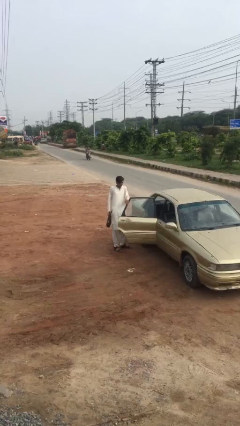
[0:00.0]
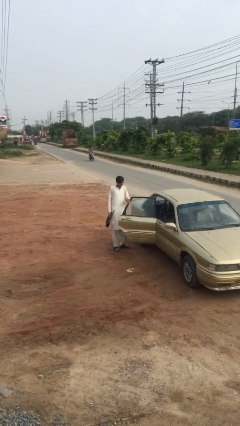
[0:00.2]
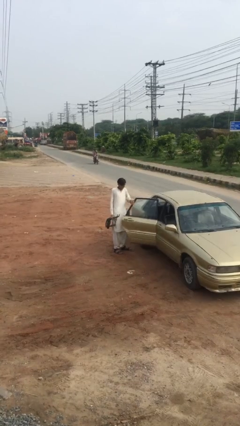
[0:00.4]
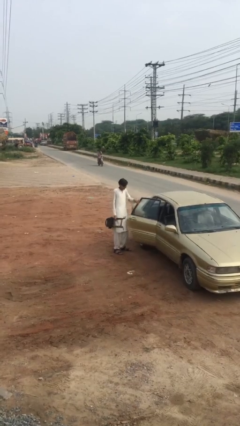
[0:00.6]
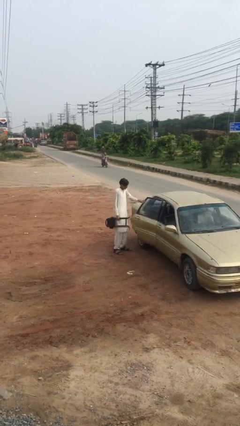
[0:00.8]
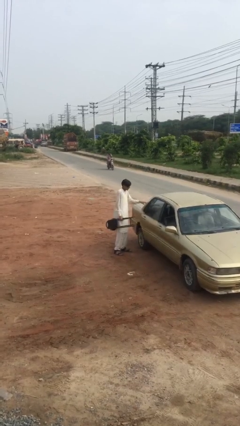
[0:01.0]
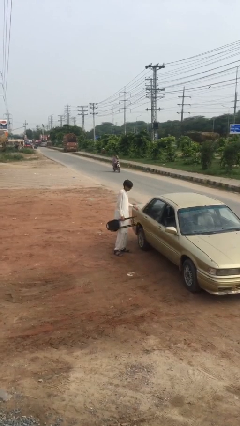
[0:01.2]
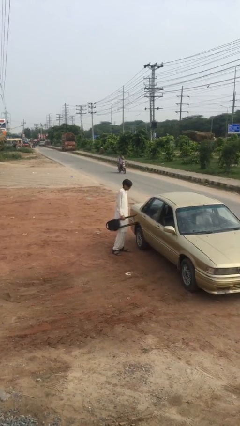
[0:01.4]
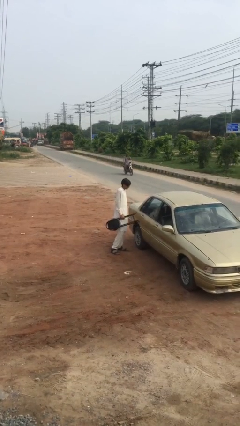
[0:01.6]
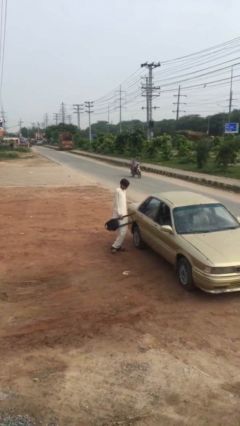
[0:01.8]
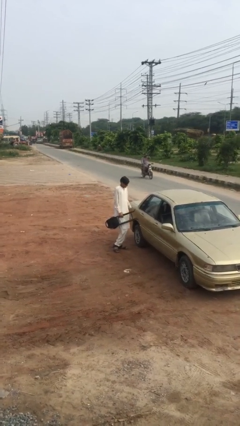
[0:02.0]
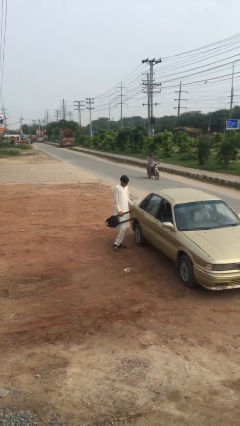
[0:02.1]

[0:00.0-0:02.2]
person closes car door

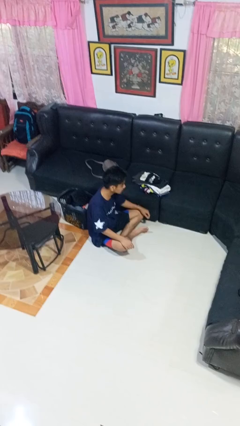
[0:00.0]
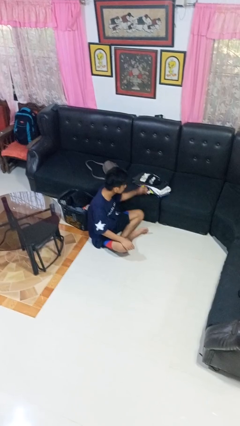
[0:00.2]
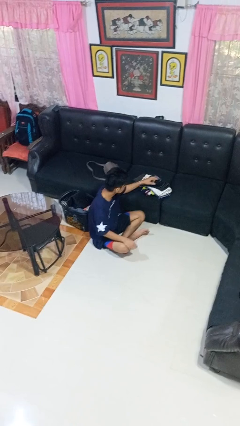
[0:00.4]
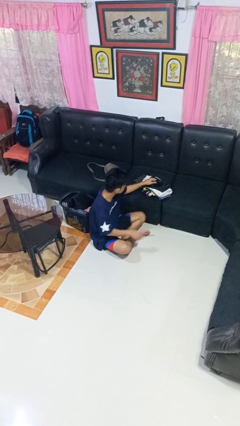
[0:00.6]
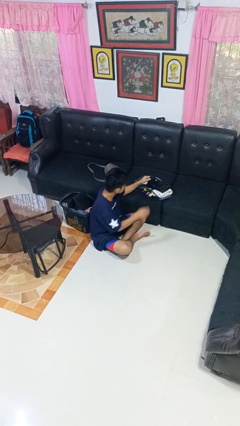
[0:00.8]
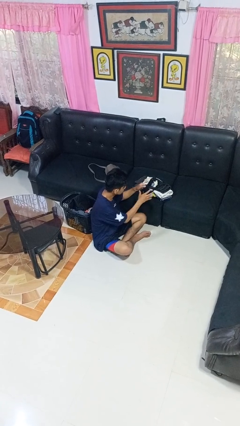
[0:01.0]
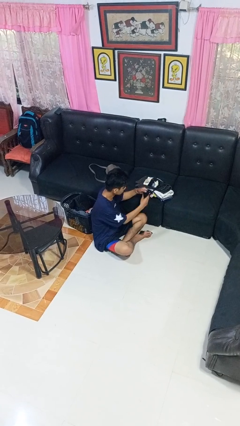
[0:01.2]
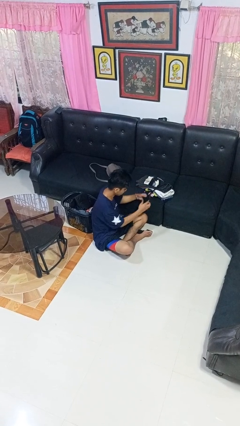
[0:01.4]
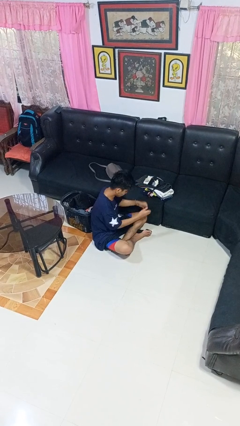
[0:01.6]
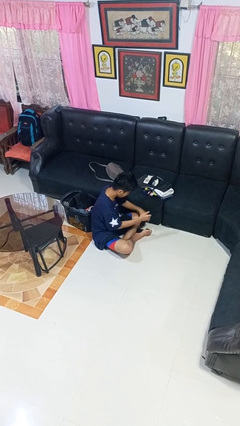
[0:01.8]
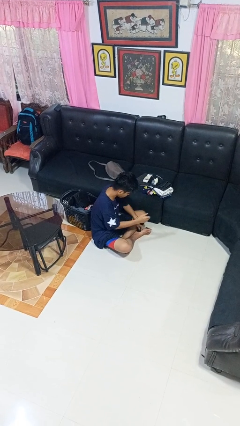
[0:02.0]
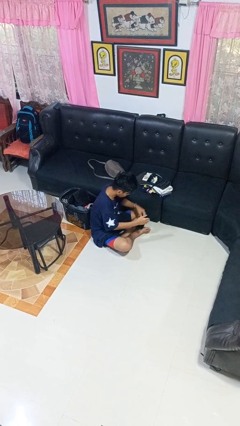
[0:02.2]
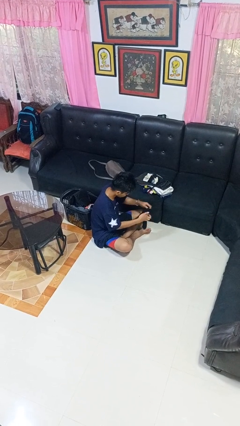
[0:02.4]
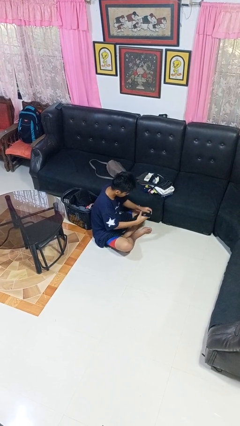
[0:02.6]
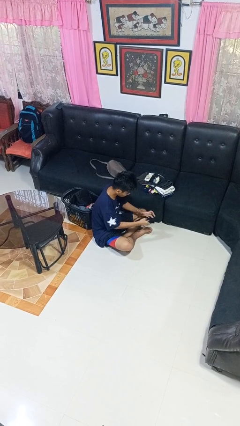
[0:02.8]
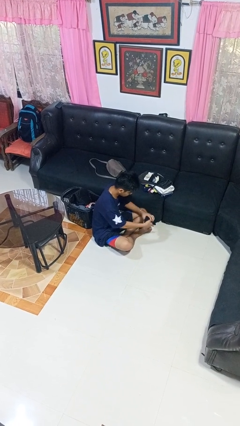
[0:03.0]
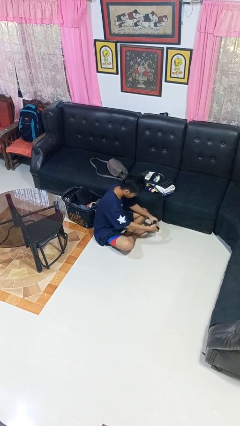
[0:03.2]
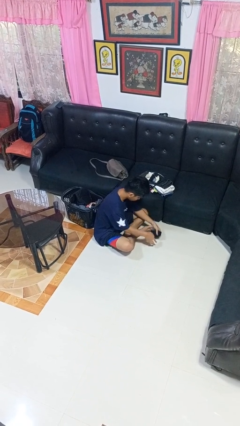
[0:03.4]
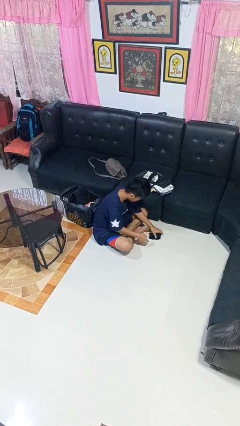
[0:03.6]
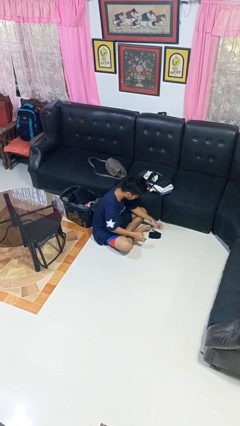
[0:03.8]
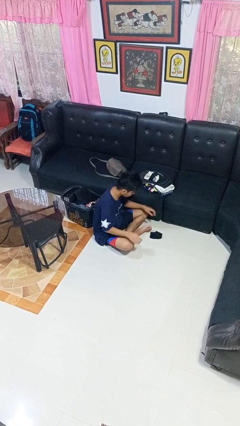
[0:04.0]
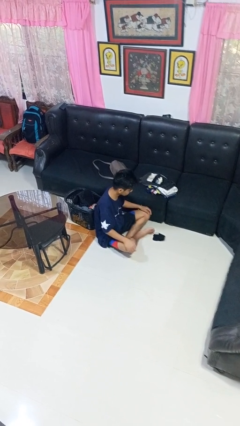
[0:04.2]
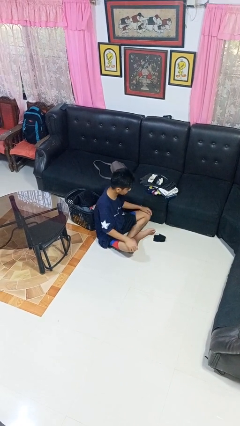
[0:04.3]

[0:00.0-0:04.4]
person folds socks

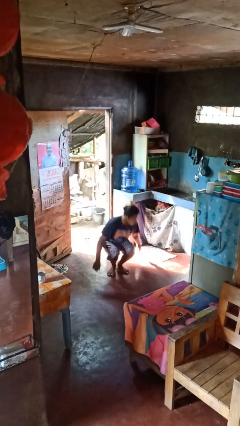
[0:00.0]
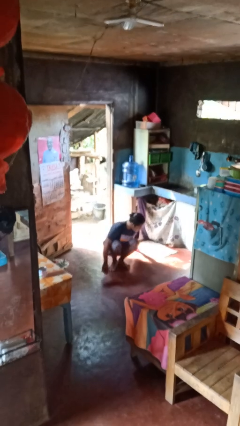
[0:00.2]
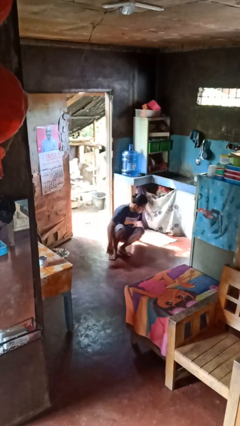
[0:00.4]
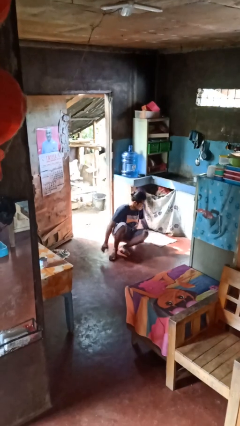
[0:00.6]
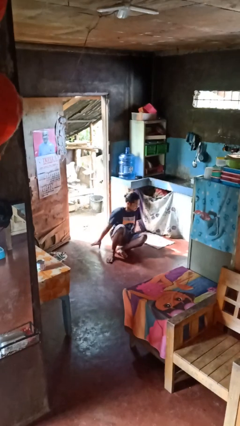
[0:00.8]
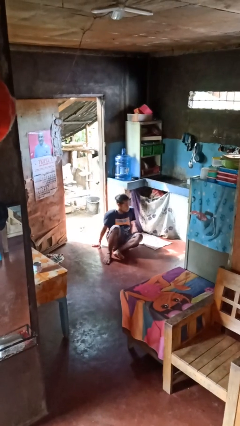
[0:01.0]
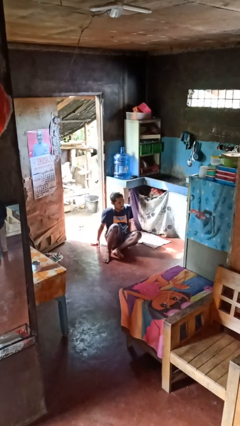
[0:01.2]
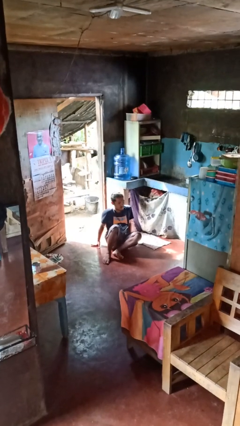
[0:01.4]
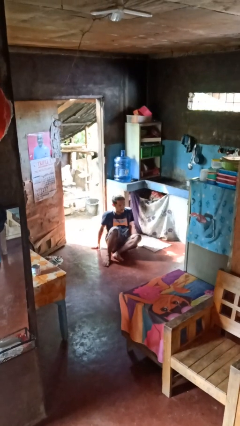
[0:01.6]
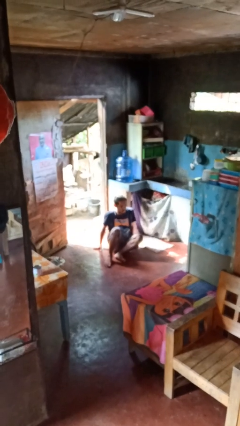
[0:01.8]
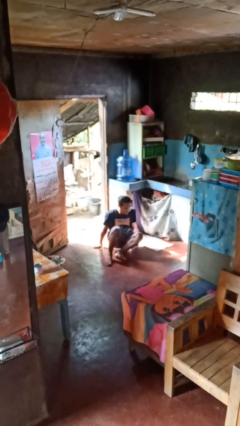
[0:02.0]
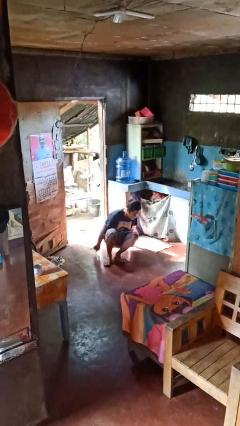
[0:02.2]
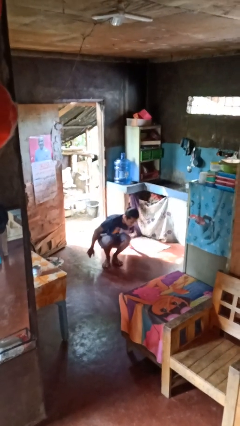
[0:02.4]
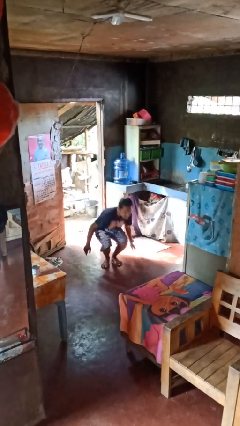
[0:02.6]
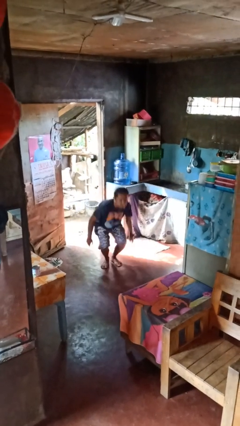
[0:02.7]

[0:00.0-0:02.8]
person falls while standing

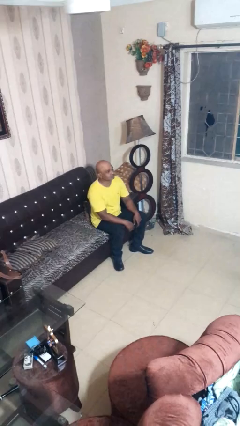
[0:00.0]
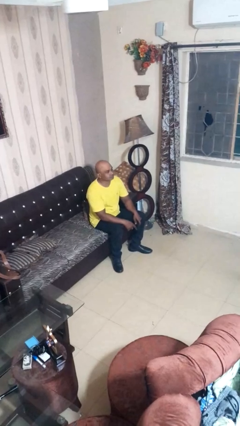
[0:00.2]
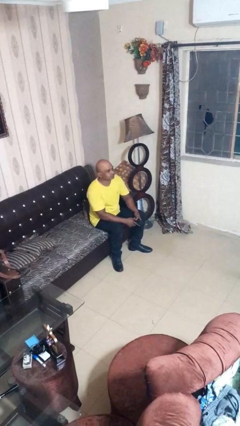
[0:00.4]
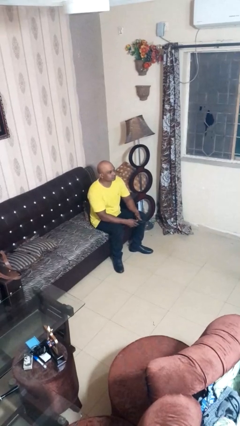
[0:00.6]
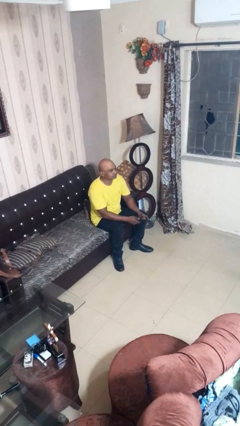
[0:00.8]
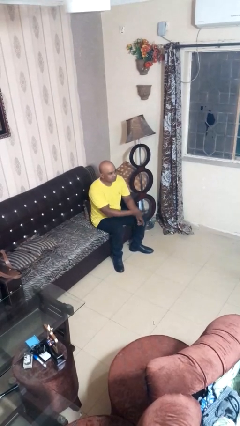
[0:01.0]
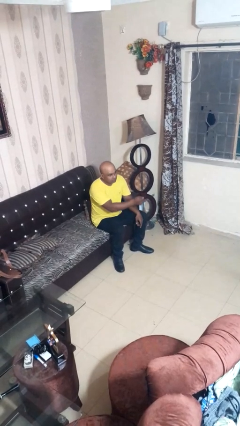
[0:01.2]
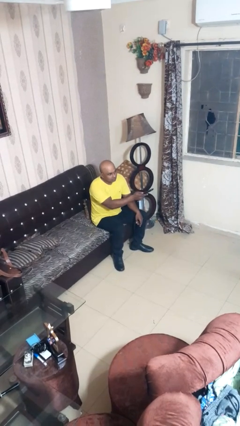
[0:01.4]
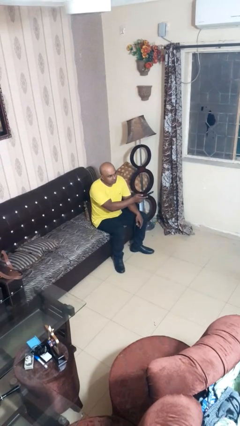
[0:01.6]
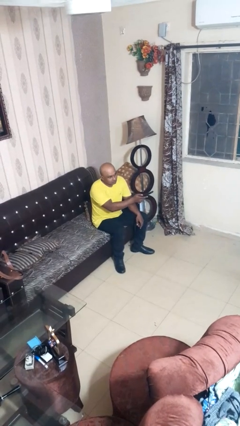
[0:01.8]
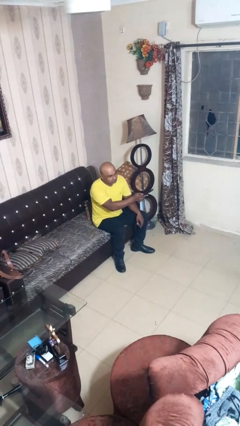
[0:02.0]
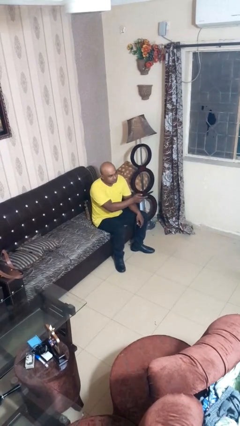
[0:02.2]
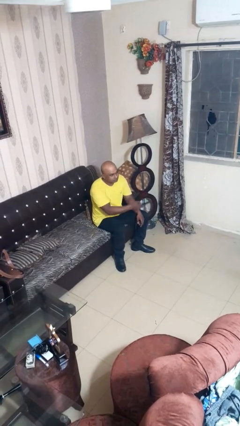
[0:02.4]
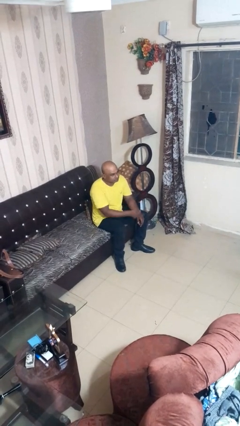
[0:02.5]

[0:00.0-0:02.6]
person uses television remote

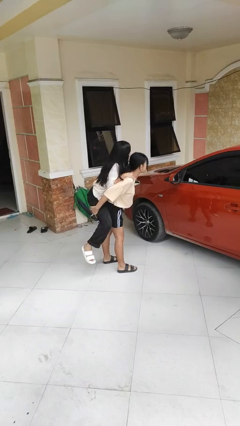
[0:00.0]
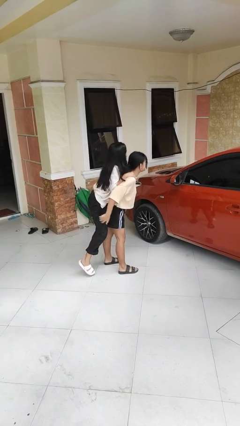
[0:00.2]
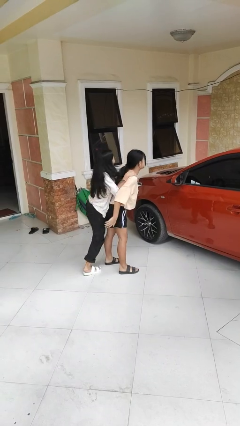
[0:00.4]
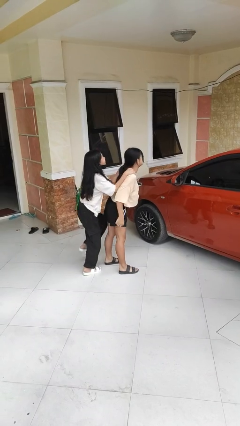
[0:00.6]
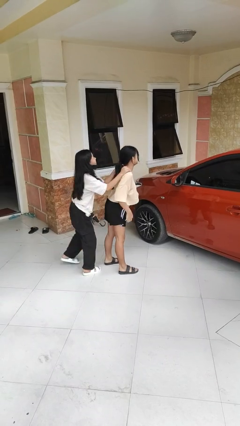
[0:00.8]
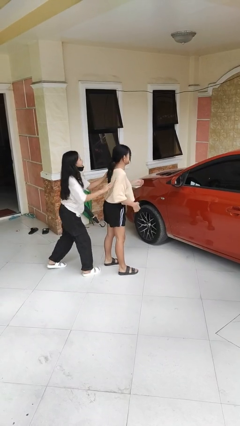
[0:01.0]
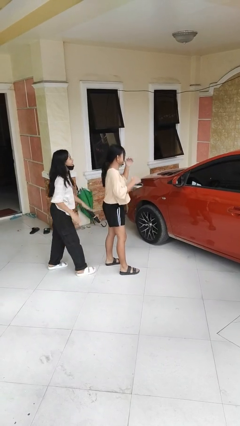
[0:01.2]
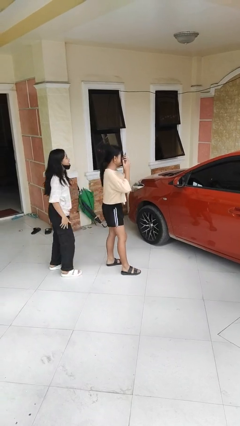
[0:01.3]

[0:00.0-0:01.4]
person puts down person

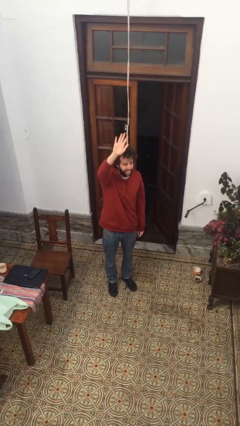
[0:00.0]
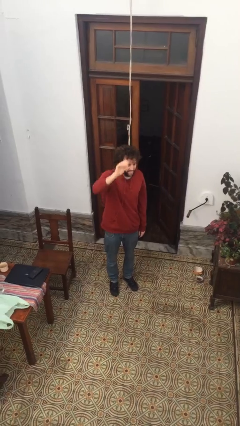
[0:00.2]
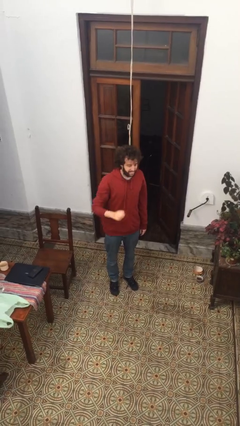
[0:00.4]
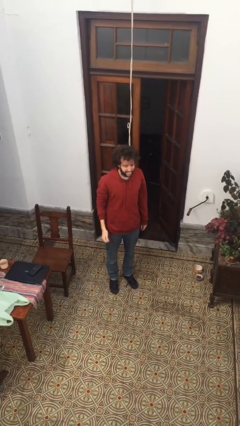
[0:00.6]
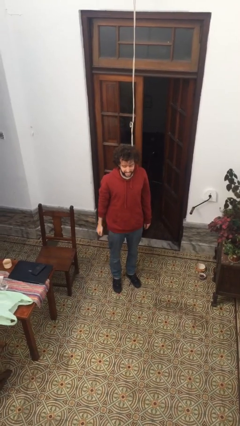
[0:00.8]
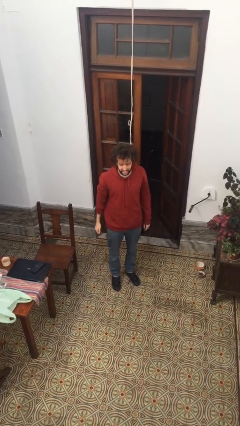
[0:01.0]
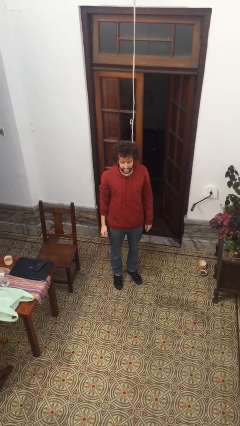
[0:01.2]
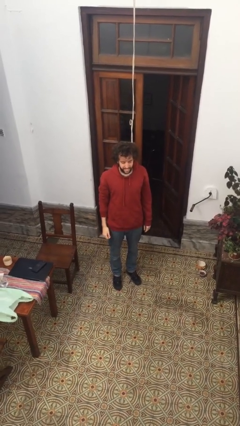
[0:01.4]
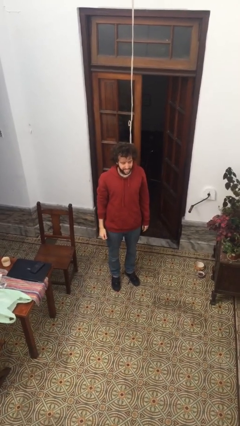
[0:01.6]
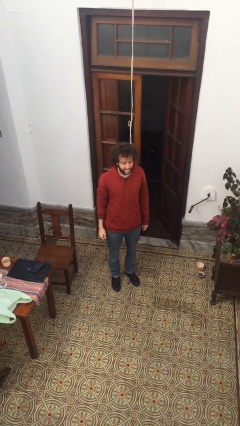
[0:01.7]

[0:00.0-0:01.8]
person gestures lower hand

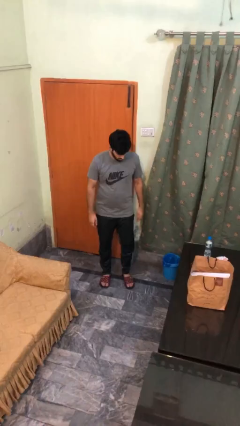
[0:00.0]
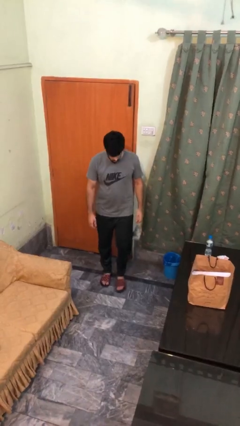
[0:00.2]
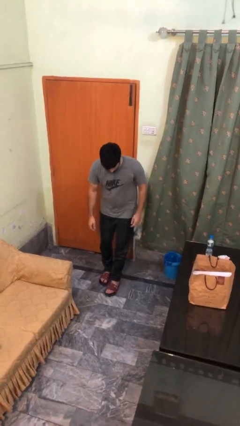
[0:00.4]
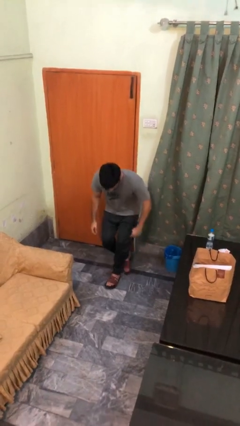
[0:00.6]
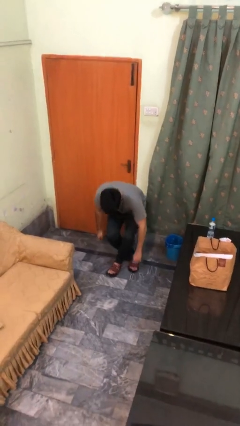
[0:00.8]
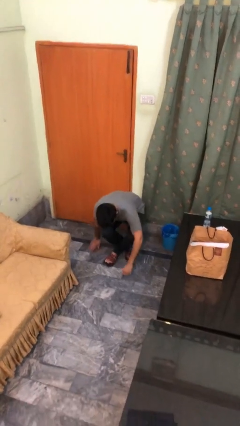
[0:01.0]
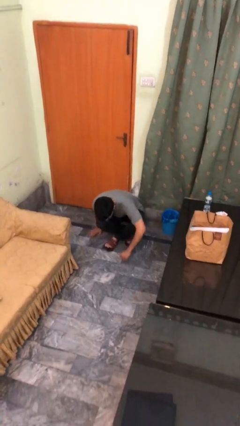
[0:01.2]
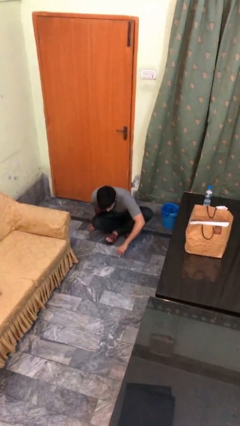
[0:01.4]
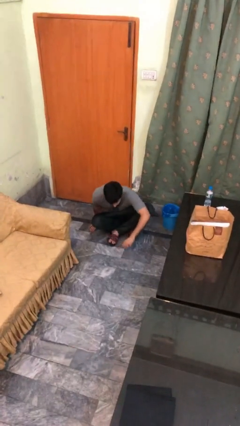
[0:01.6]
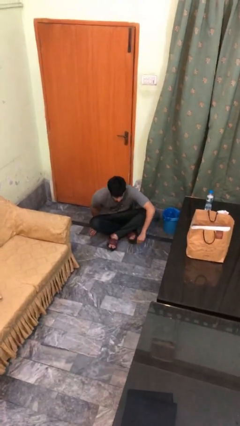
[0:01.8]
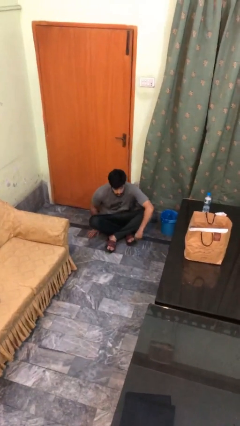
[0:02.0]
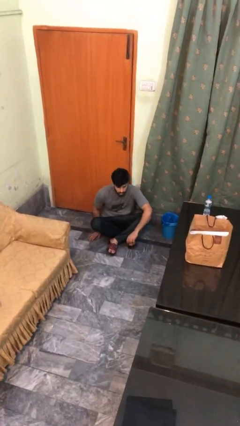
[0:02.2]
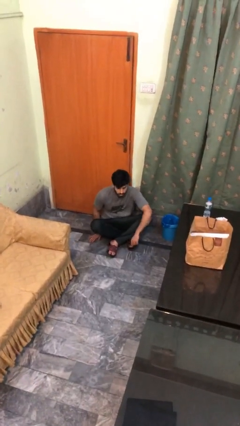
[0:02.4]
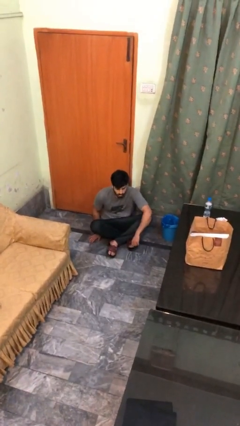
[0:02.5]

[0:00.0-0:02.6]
person sits crisscross
